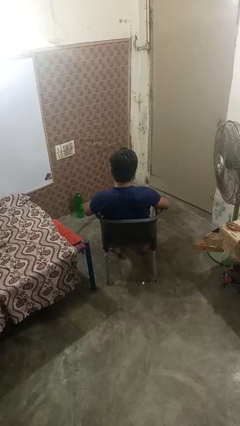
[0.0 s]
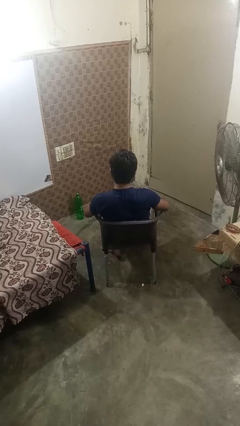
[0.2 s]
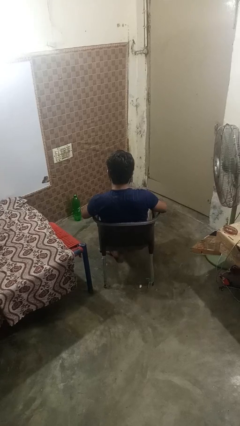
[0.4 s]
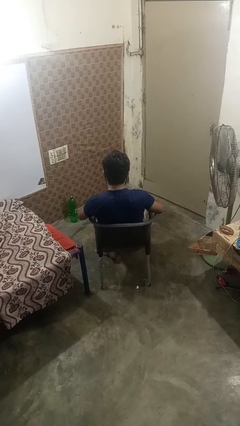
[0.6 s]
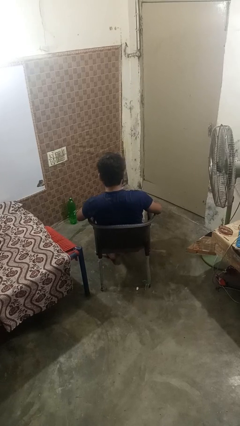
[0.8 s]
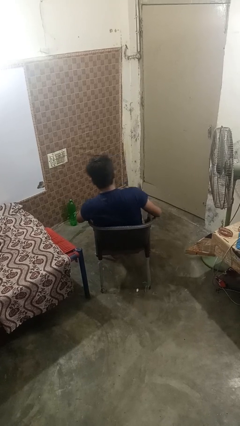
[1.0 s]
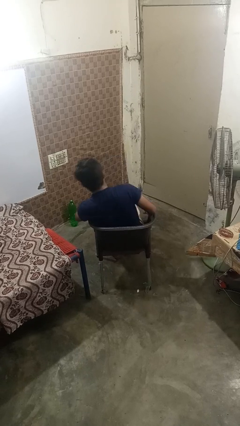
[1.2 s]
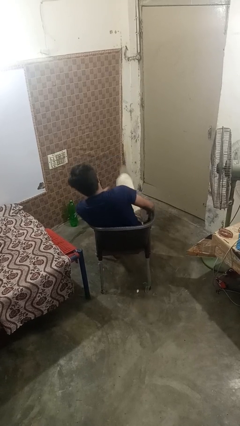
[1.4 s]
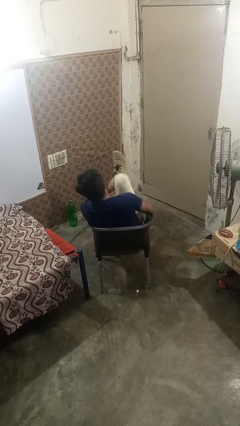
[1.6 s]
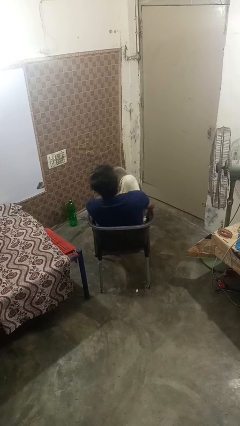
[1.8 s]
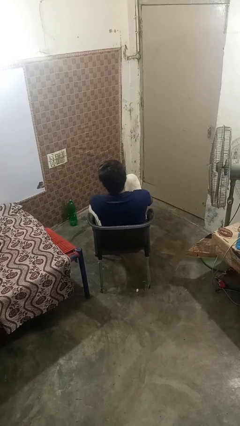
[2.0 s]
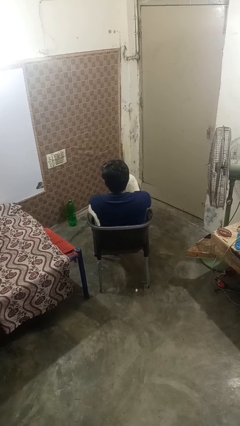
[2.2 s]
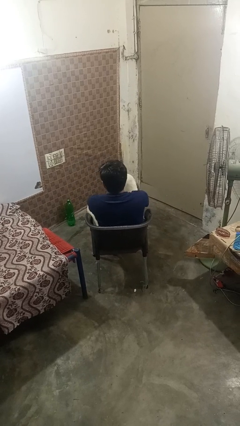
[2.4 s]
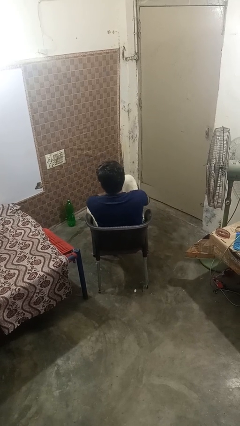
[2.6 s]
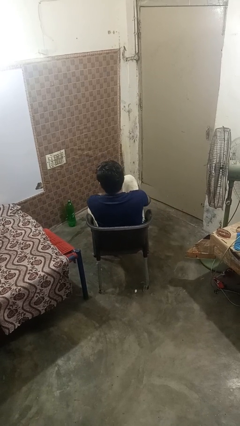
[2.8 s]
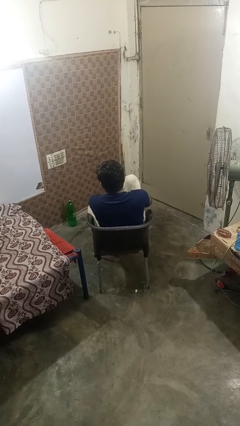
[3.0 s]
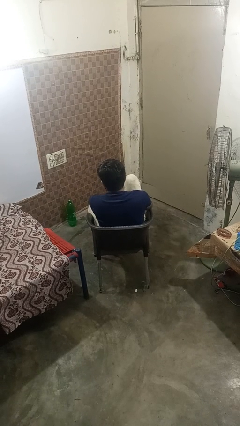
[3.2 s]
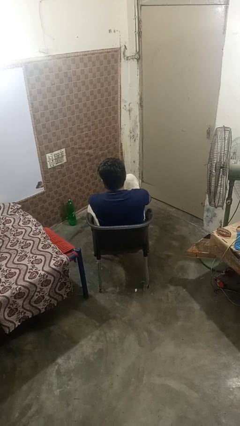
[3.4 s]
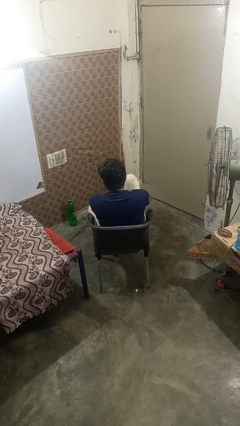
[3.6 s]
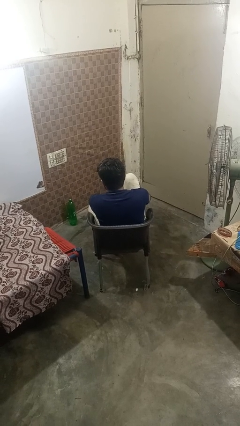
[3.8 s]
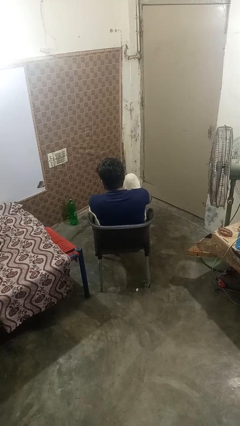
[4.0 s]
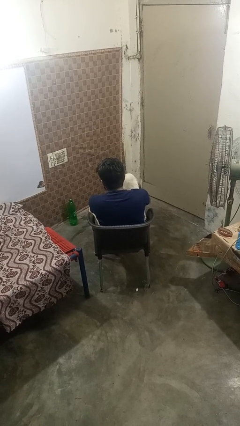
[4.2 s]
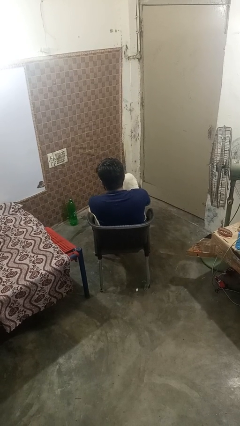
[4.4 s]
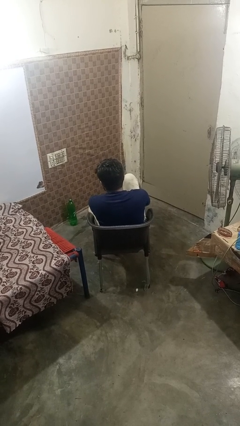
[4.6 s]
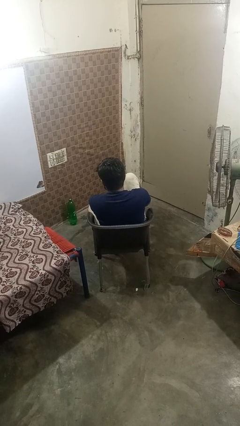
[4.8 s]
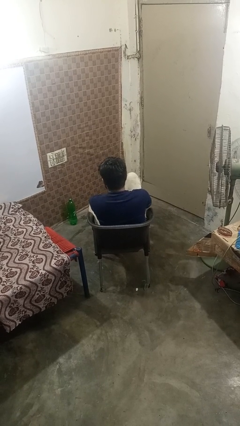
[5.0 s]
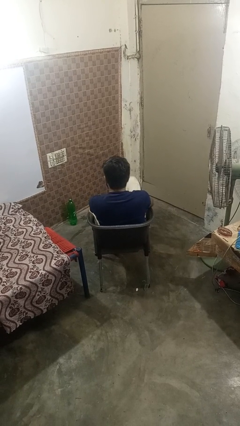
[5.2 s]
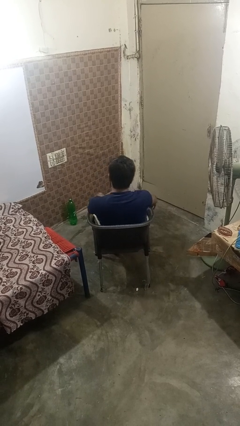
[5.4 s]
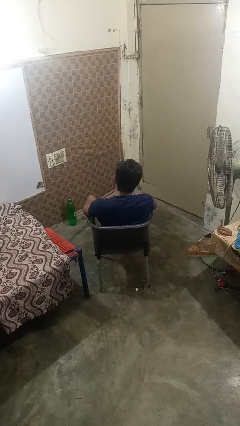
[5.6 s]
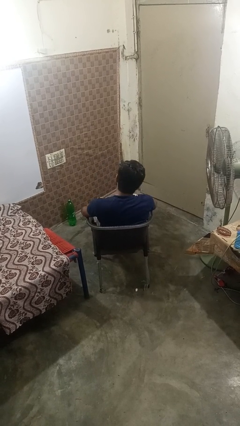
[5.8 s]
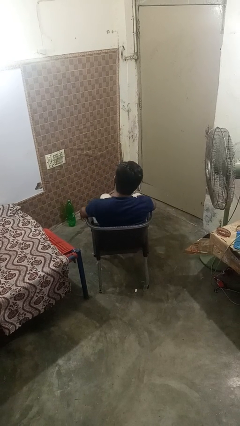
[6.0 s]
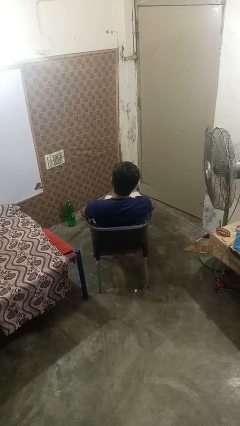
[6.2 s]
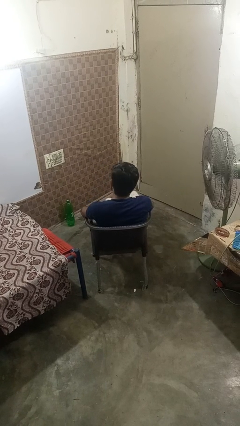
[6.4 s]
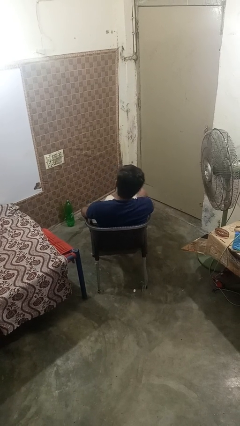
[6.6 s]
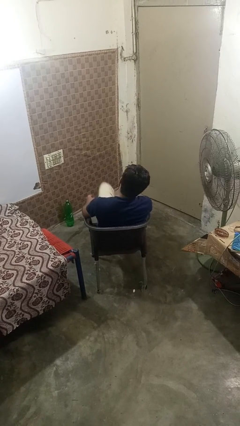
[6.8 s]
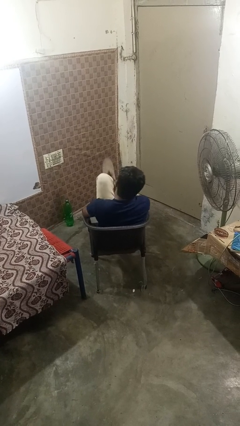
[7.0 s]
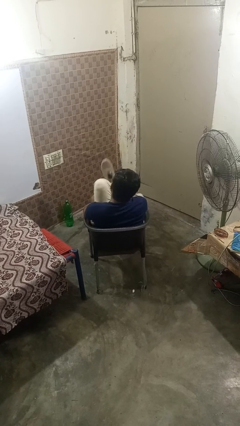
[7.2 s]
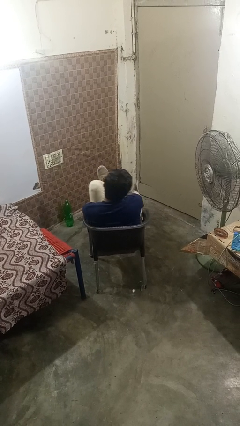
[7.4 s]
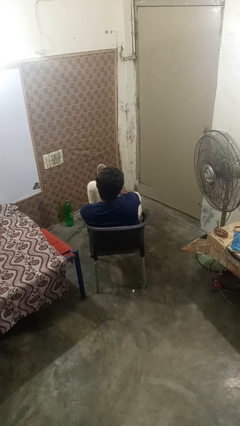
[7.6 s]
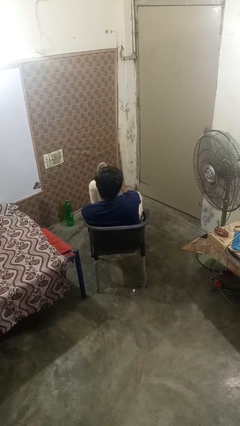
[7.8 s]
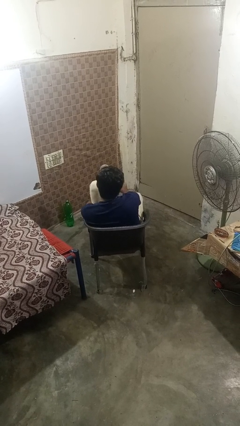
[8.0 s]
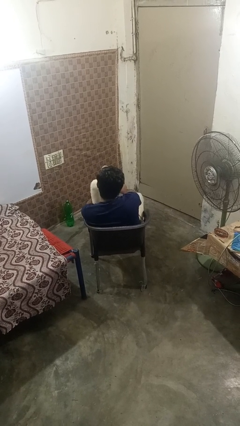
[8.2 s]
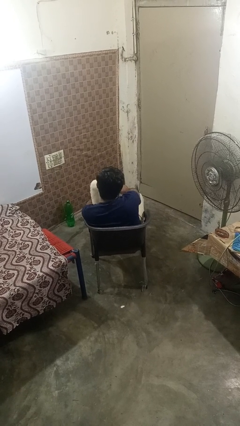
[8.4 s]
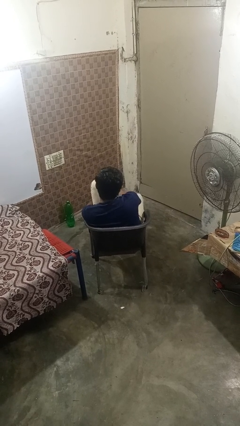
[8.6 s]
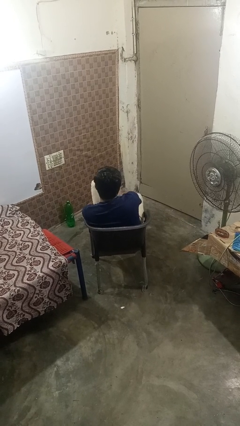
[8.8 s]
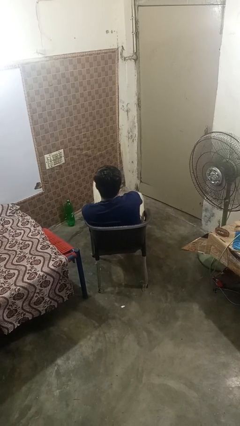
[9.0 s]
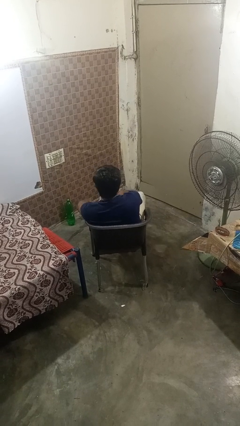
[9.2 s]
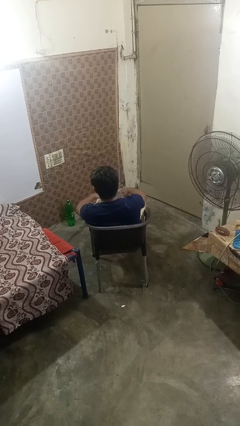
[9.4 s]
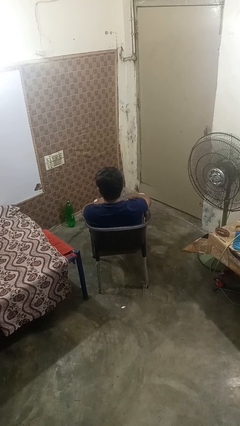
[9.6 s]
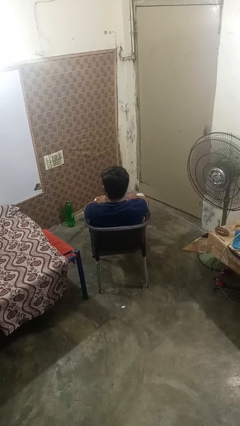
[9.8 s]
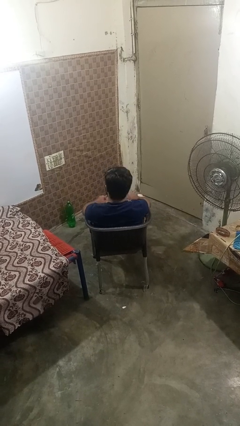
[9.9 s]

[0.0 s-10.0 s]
person puts on shoes

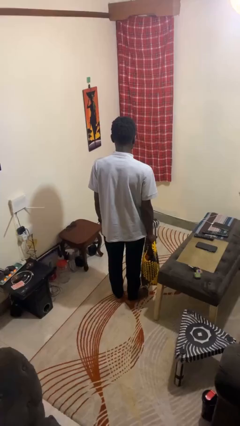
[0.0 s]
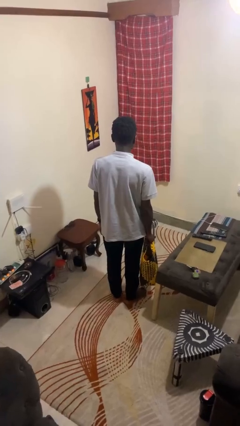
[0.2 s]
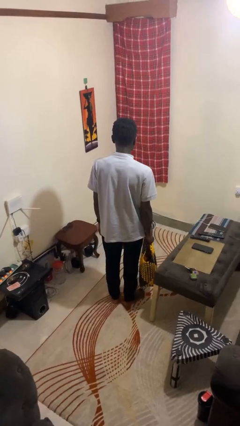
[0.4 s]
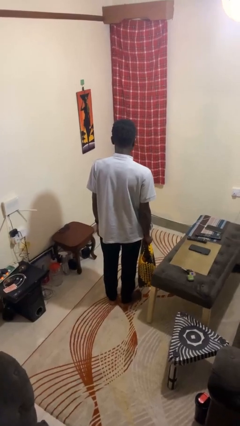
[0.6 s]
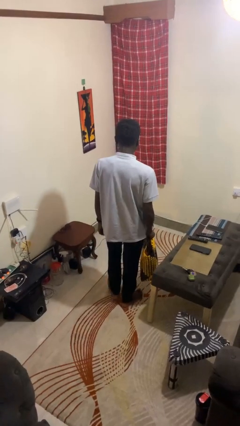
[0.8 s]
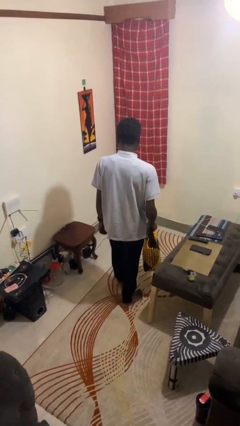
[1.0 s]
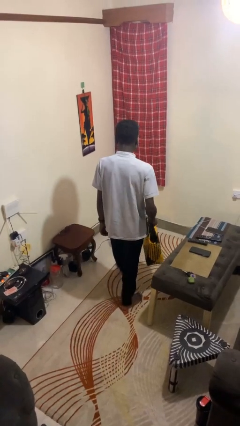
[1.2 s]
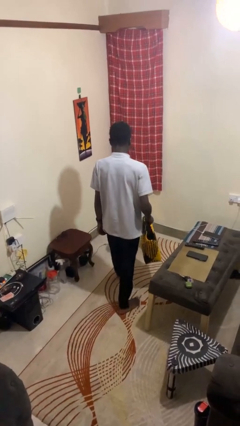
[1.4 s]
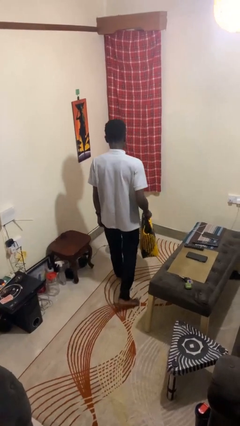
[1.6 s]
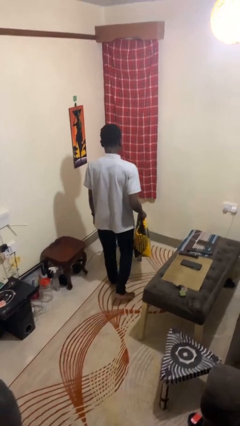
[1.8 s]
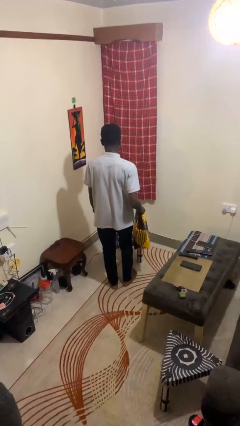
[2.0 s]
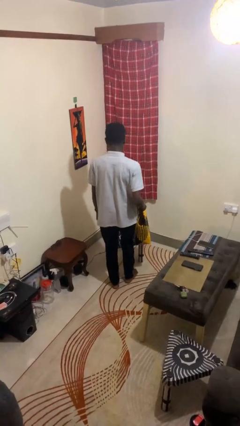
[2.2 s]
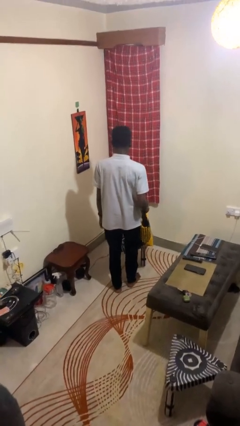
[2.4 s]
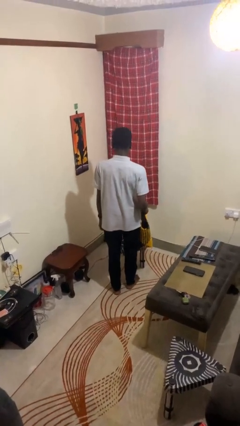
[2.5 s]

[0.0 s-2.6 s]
person carries groceries

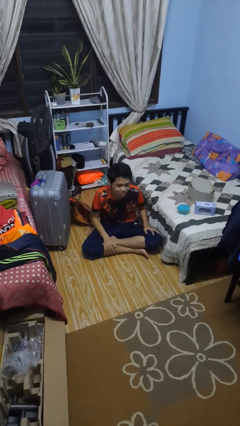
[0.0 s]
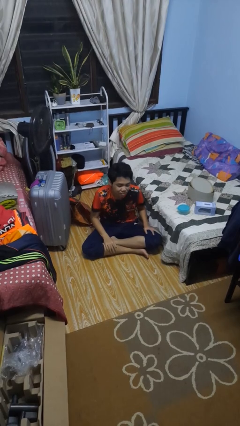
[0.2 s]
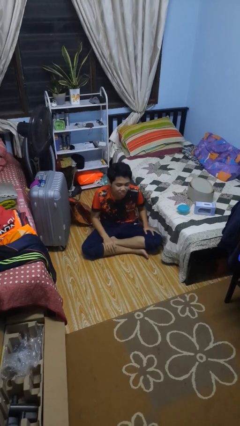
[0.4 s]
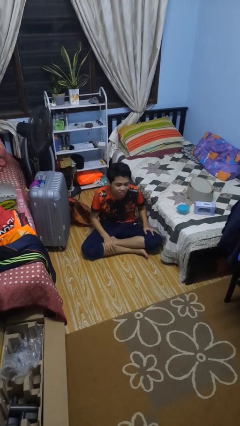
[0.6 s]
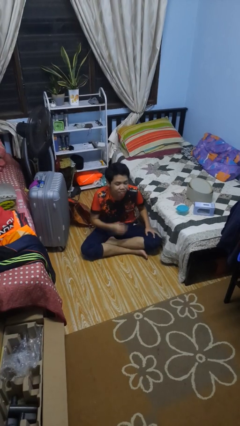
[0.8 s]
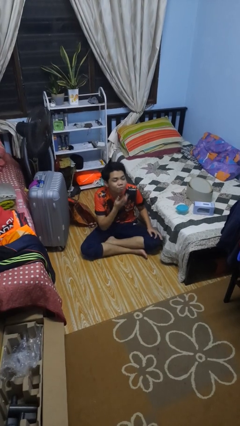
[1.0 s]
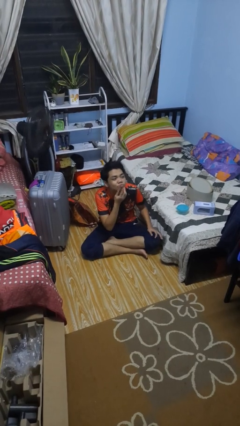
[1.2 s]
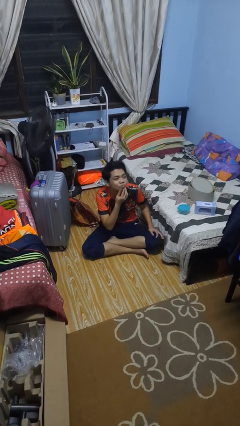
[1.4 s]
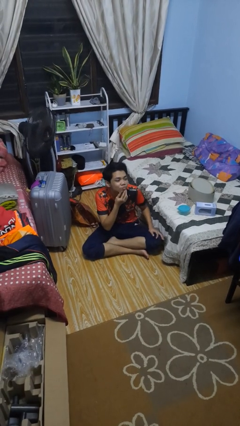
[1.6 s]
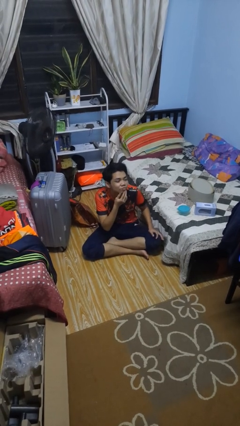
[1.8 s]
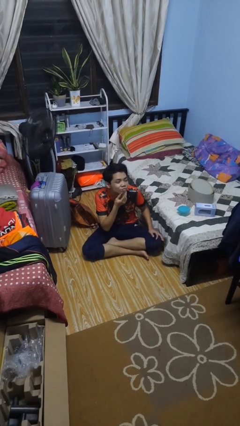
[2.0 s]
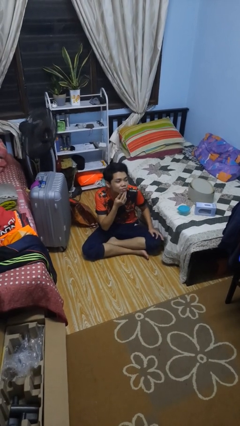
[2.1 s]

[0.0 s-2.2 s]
person strokes chin

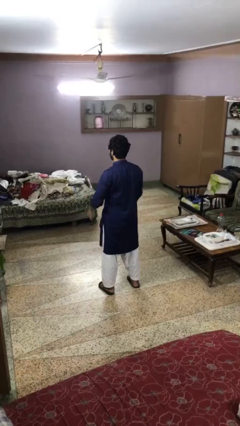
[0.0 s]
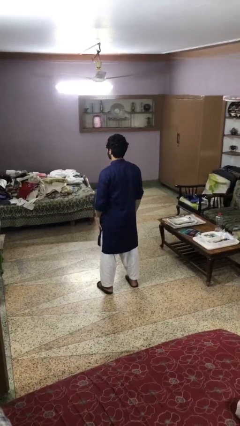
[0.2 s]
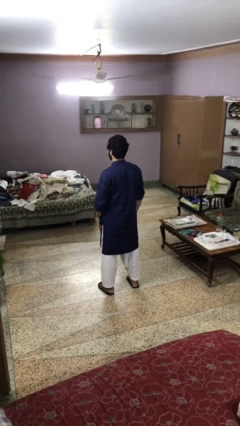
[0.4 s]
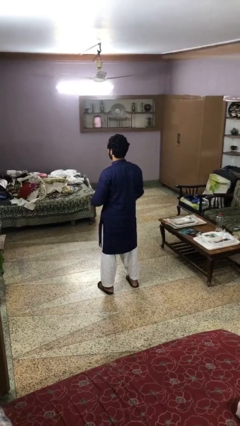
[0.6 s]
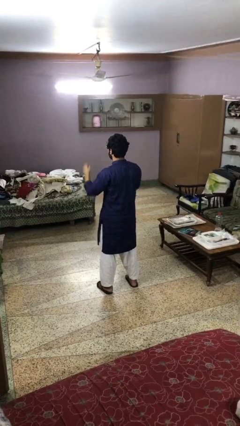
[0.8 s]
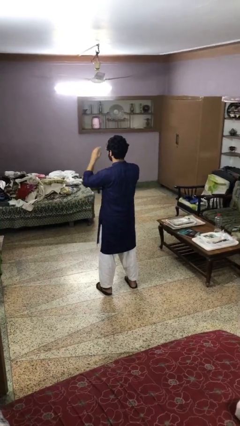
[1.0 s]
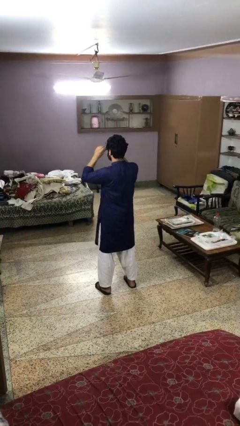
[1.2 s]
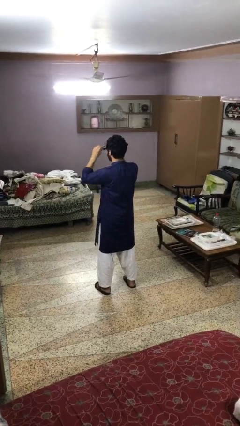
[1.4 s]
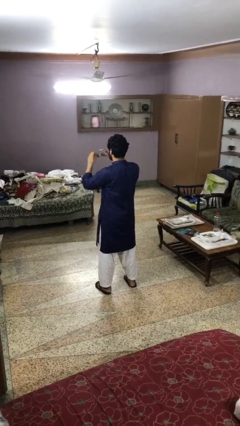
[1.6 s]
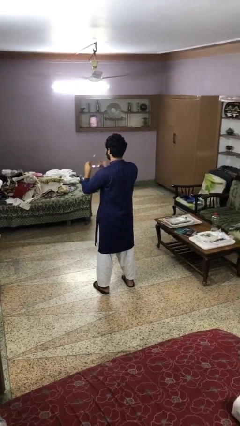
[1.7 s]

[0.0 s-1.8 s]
person takes off sunglasses

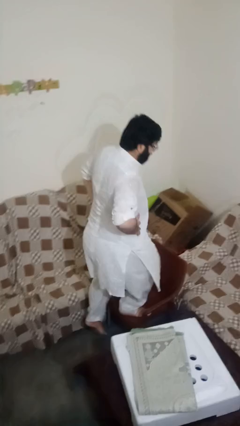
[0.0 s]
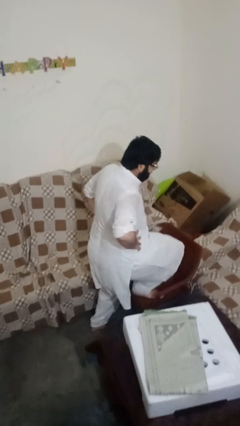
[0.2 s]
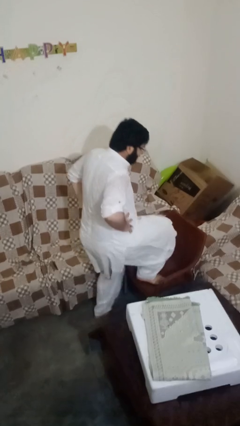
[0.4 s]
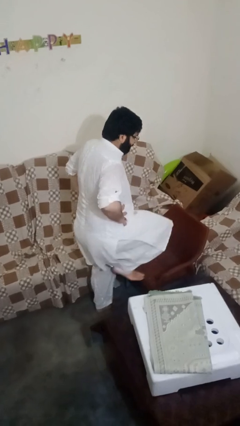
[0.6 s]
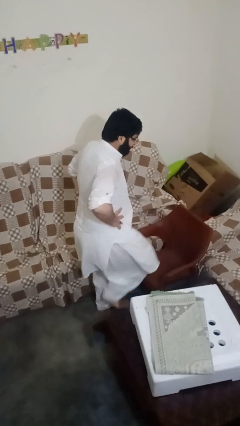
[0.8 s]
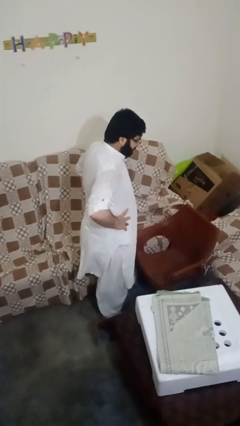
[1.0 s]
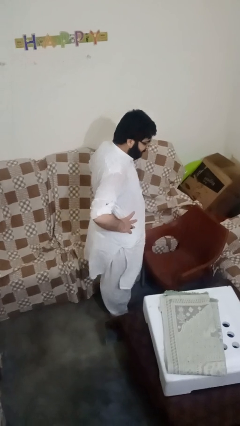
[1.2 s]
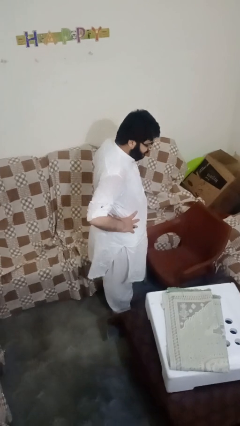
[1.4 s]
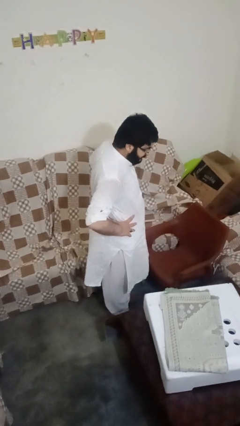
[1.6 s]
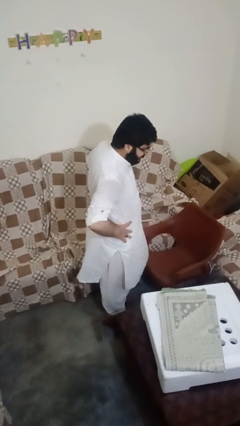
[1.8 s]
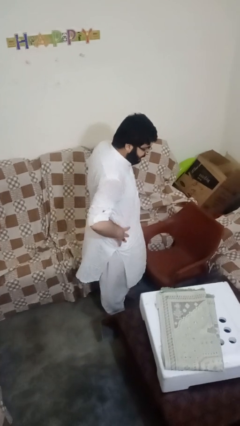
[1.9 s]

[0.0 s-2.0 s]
person climbs off chair
